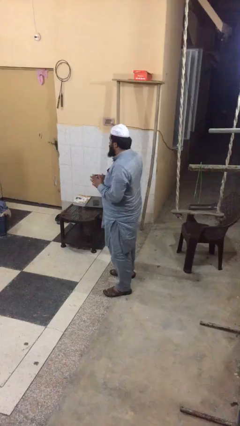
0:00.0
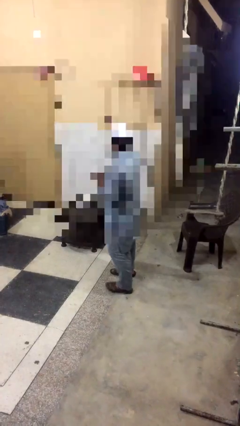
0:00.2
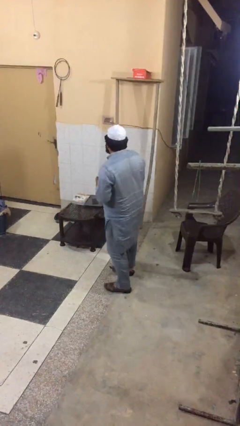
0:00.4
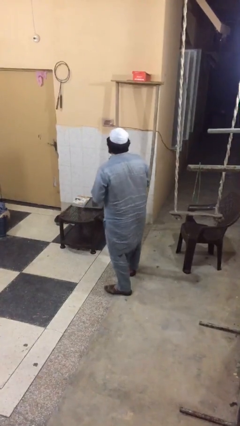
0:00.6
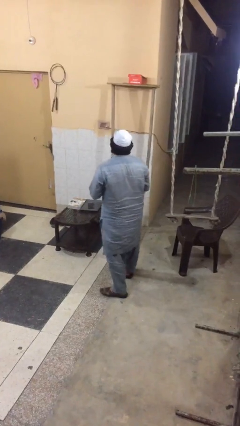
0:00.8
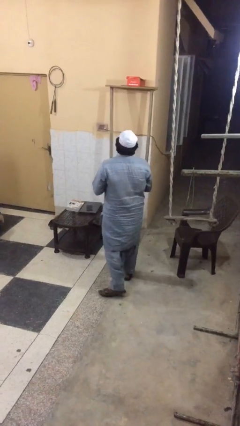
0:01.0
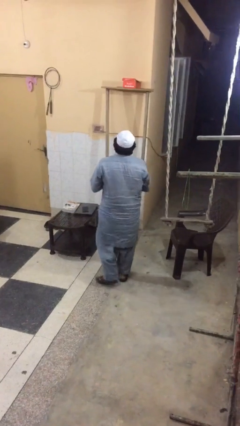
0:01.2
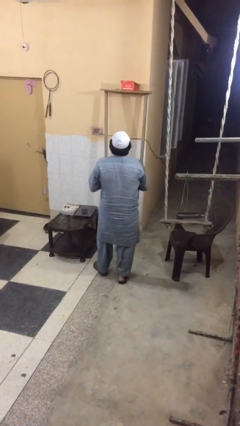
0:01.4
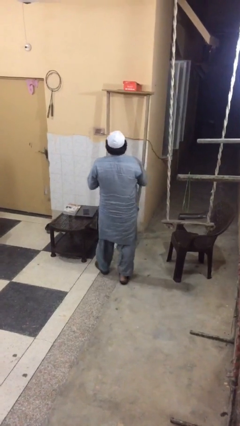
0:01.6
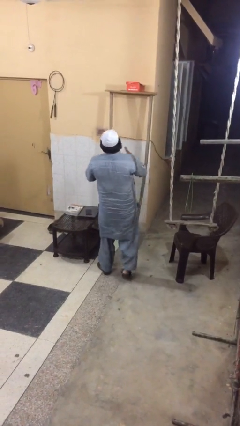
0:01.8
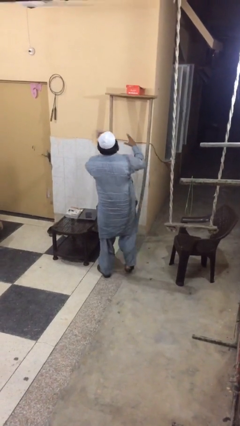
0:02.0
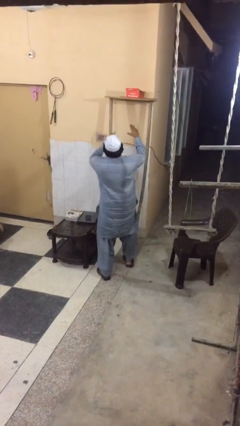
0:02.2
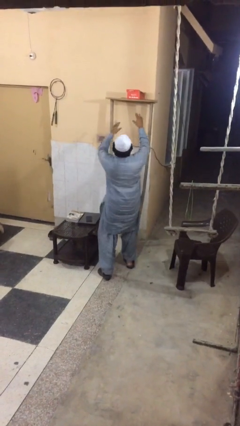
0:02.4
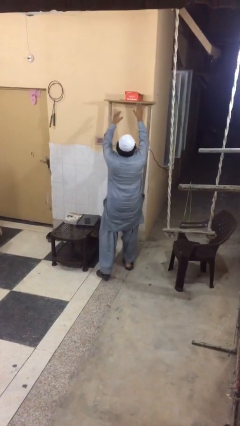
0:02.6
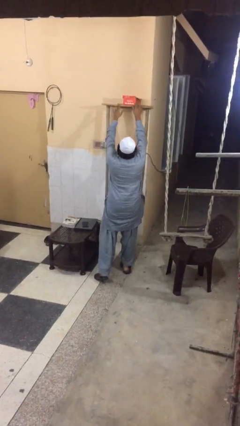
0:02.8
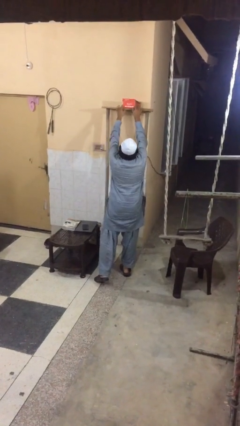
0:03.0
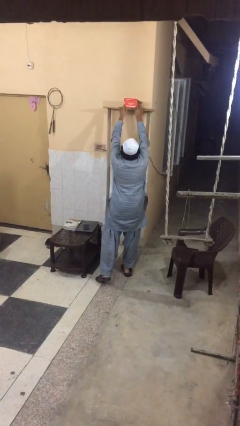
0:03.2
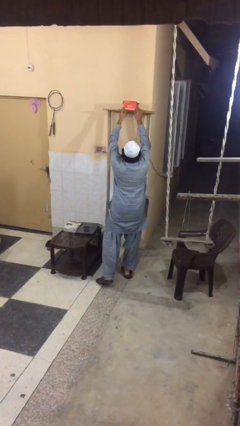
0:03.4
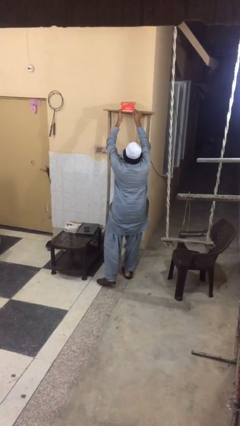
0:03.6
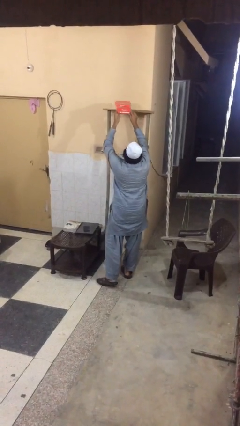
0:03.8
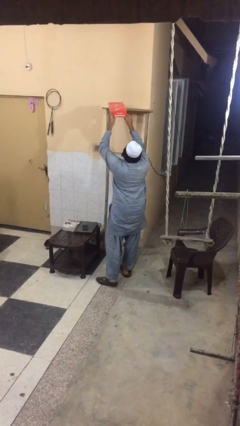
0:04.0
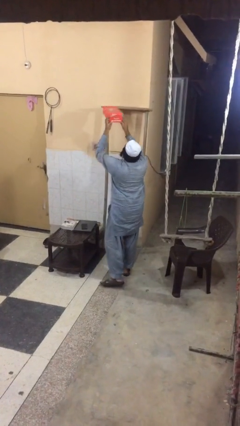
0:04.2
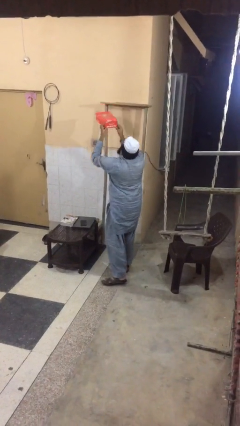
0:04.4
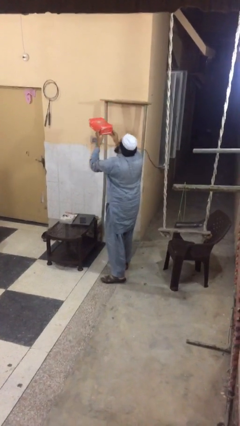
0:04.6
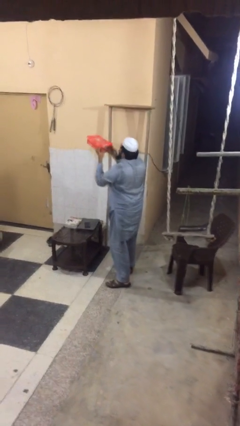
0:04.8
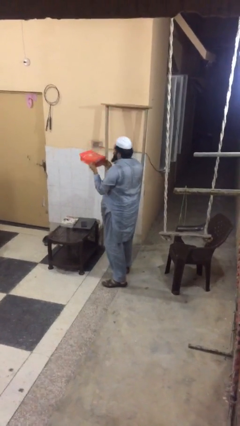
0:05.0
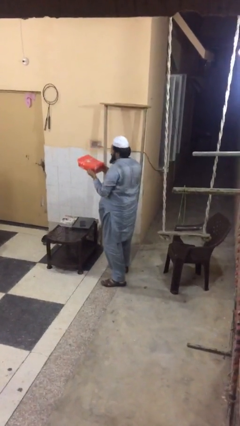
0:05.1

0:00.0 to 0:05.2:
person picks up object from shelf

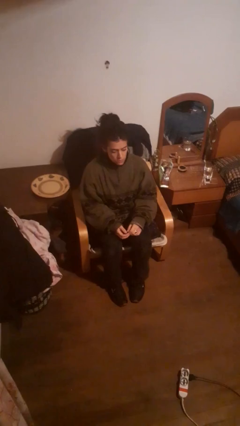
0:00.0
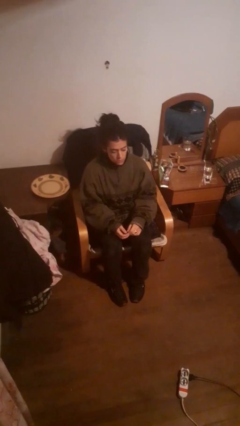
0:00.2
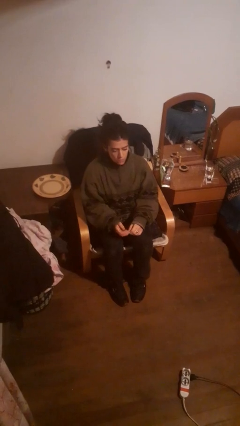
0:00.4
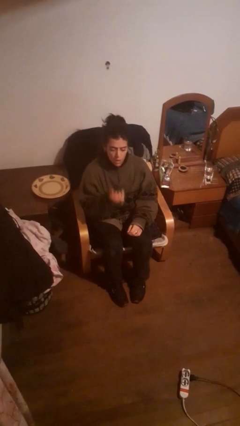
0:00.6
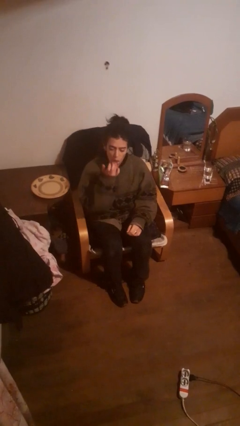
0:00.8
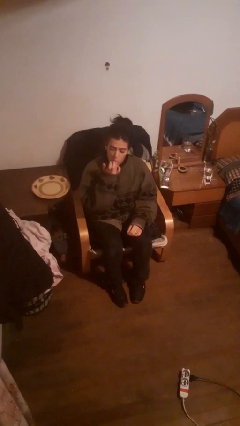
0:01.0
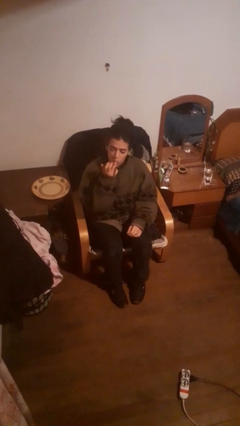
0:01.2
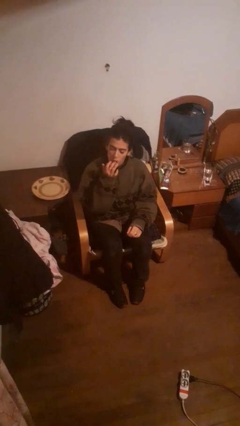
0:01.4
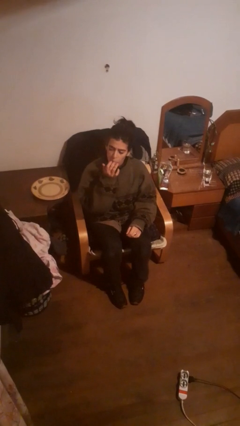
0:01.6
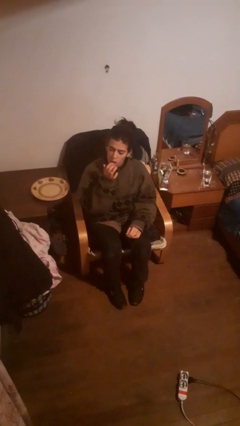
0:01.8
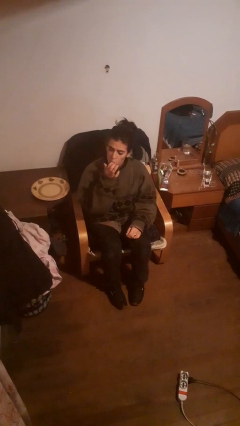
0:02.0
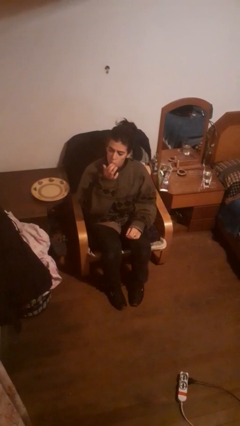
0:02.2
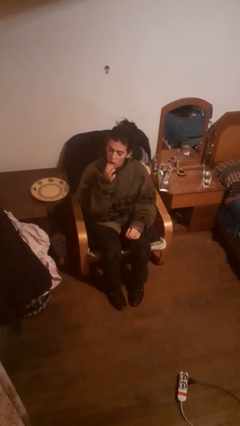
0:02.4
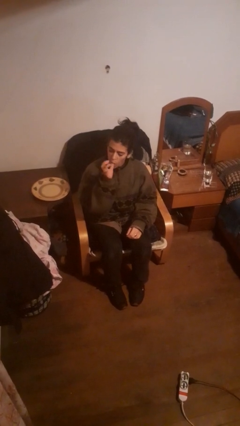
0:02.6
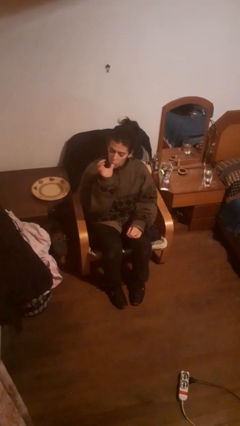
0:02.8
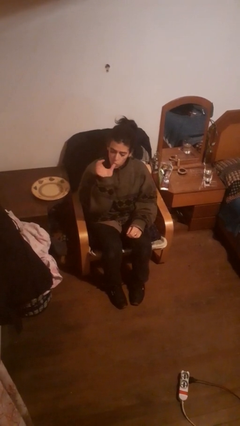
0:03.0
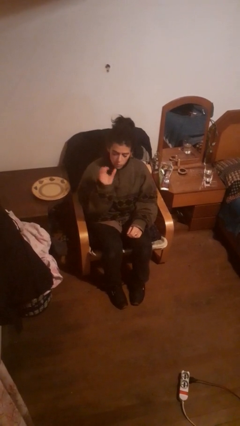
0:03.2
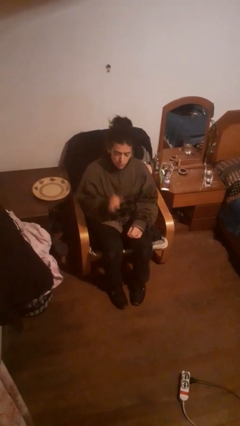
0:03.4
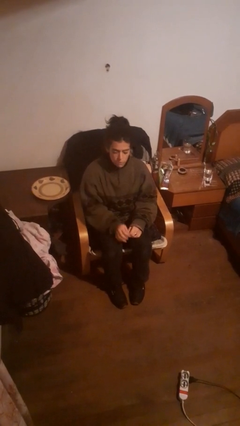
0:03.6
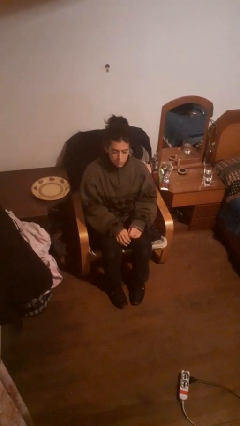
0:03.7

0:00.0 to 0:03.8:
person licks fingers

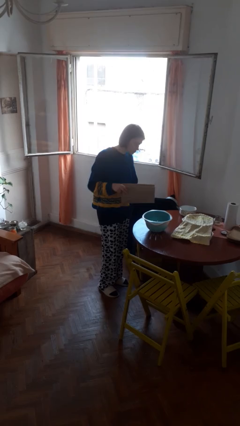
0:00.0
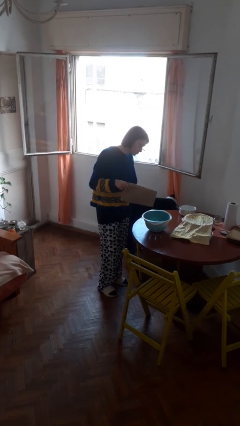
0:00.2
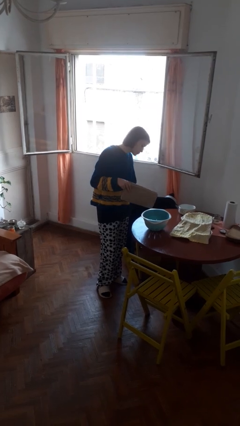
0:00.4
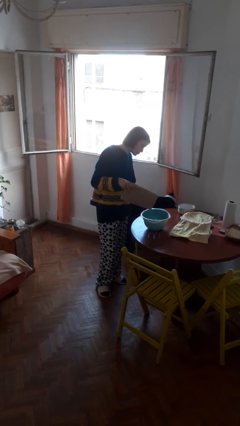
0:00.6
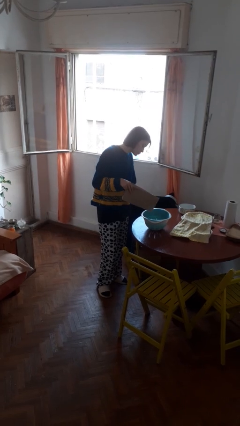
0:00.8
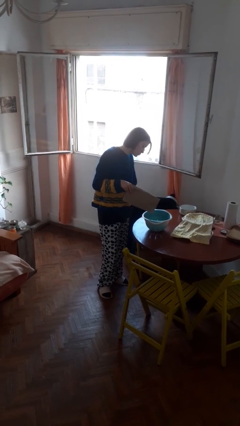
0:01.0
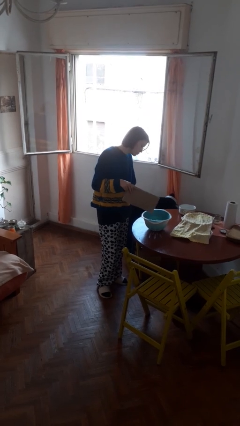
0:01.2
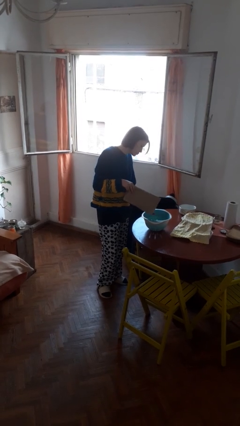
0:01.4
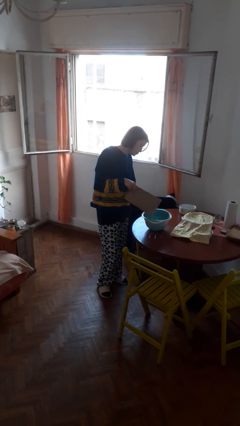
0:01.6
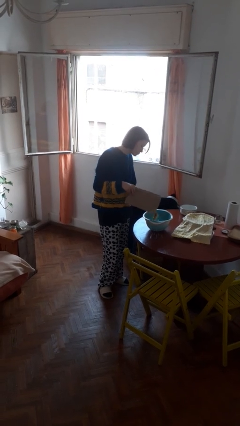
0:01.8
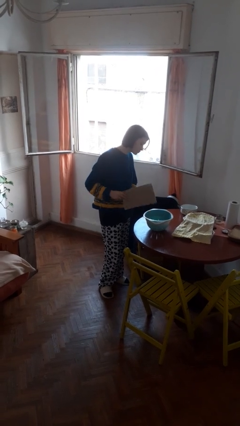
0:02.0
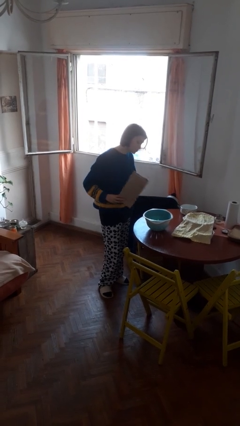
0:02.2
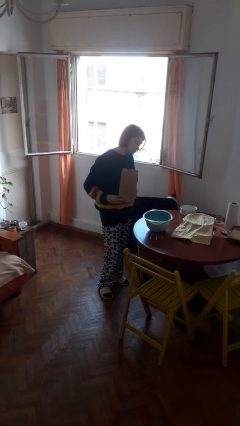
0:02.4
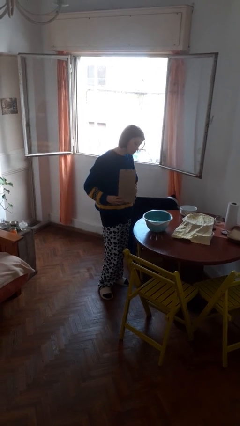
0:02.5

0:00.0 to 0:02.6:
person pours into bowl

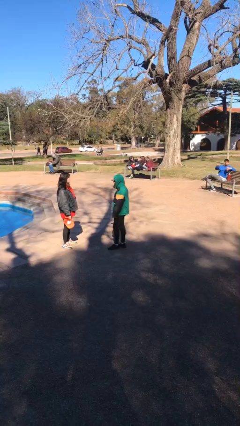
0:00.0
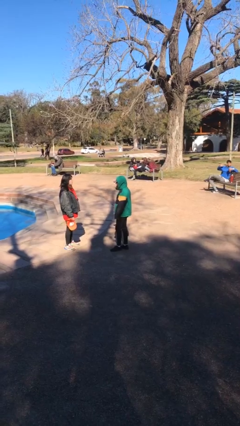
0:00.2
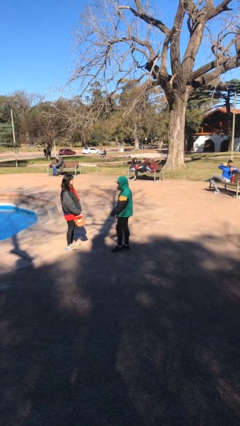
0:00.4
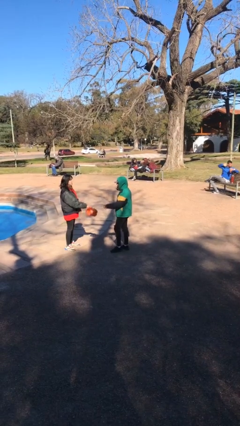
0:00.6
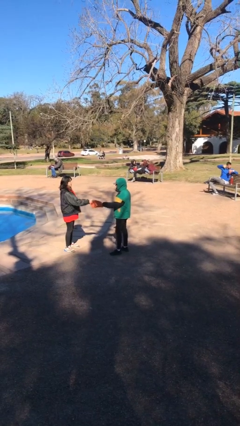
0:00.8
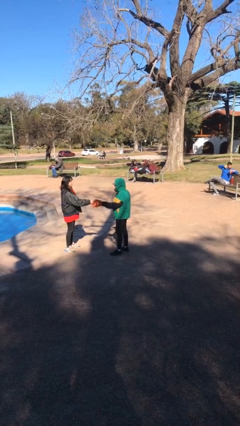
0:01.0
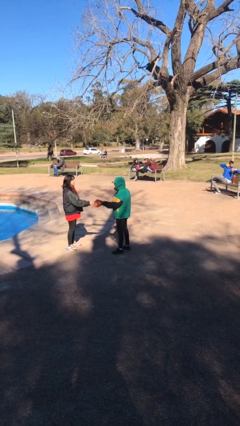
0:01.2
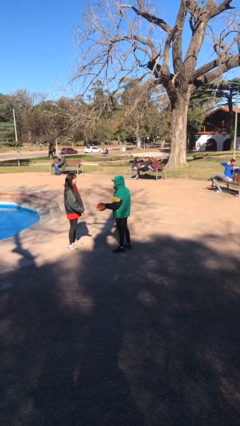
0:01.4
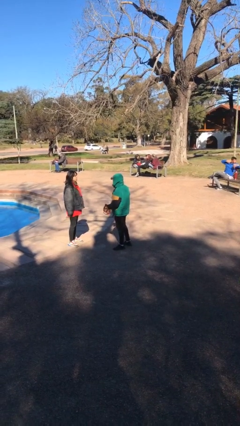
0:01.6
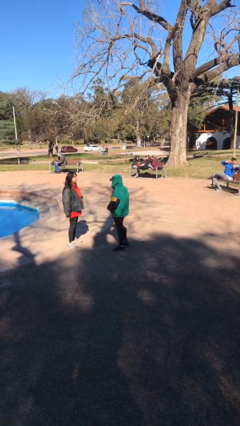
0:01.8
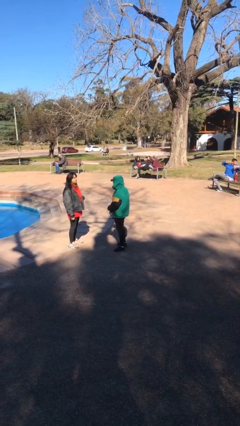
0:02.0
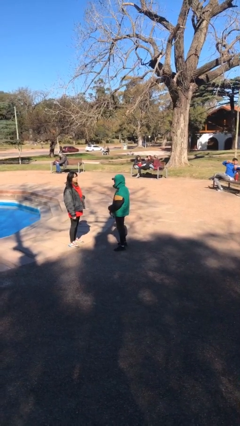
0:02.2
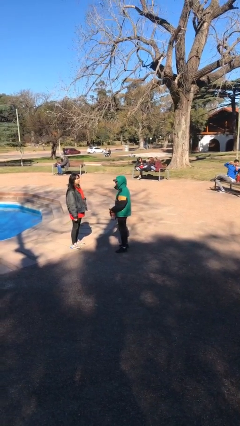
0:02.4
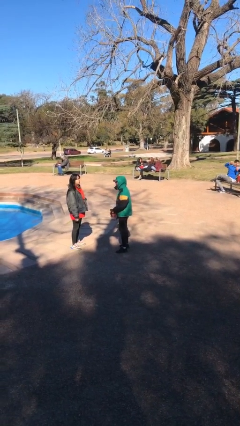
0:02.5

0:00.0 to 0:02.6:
person transfers object to person

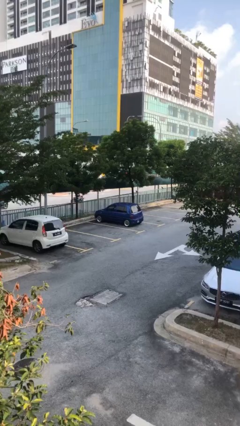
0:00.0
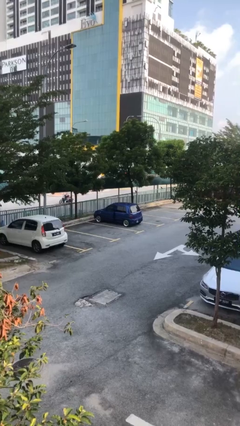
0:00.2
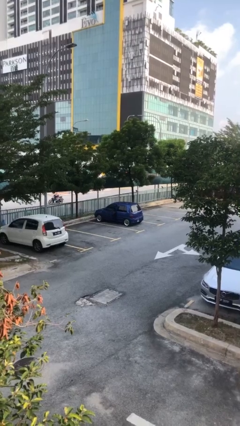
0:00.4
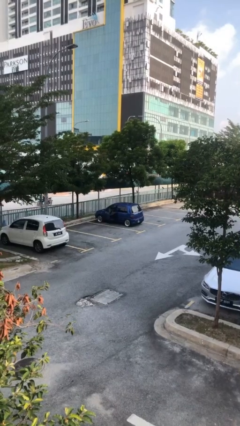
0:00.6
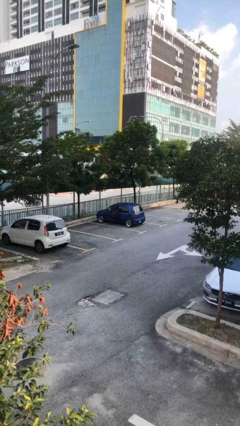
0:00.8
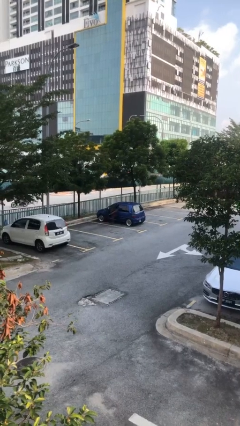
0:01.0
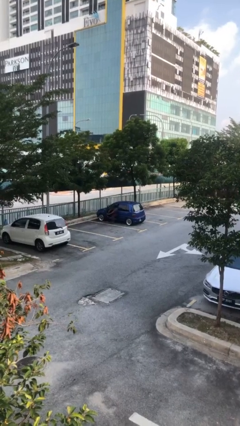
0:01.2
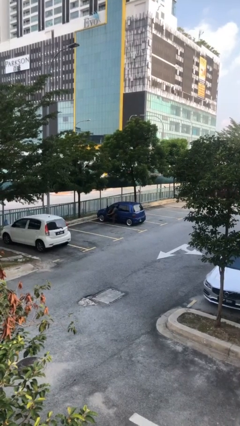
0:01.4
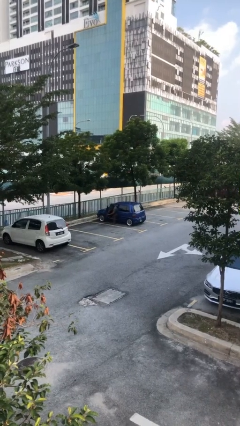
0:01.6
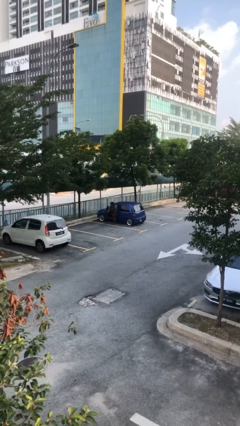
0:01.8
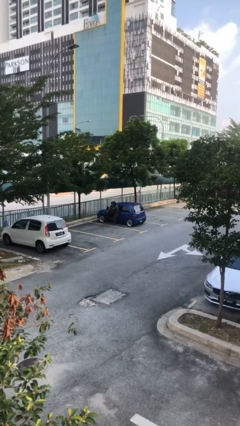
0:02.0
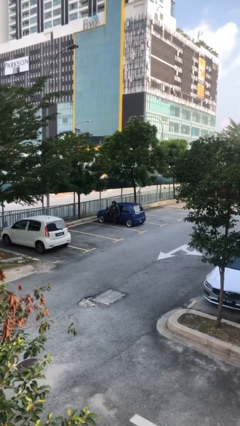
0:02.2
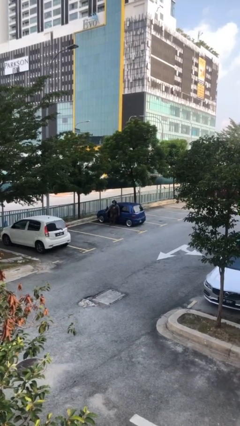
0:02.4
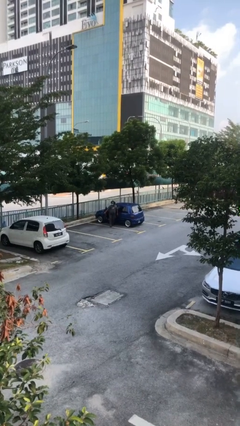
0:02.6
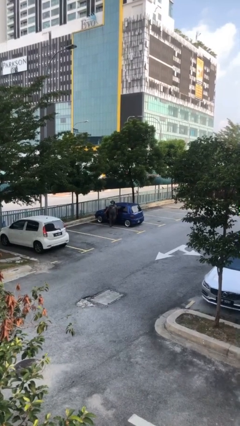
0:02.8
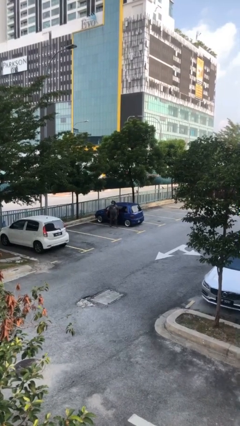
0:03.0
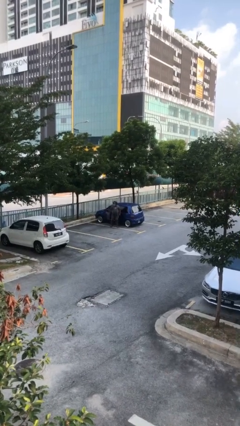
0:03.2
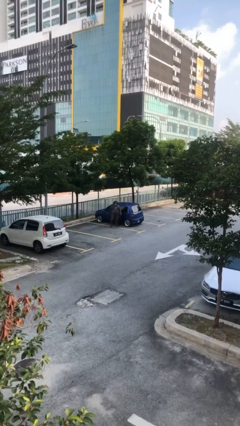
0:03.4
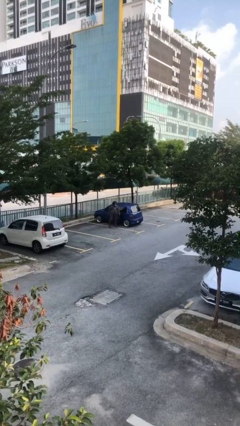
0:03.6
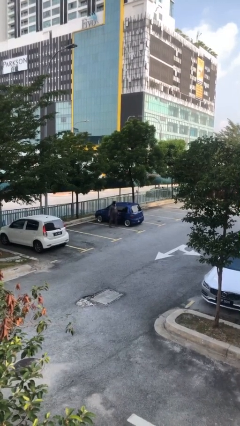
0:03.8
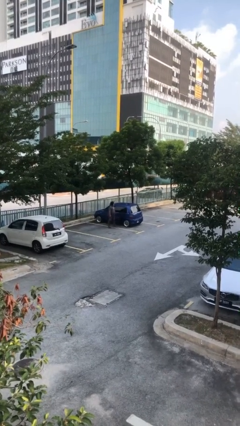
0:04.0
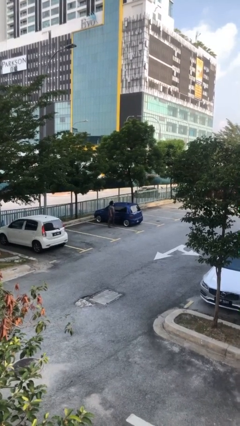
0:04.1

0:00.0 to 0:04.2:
car drops off person
